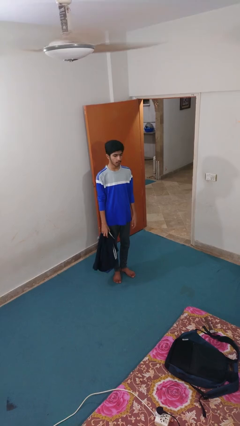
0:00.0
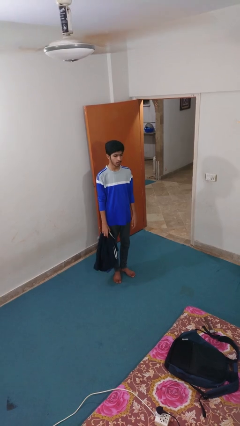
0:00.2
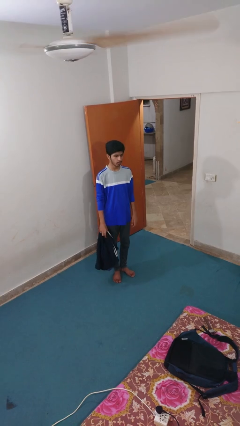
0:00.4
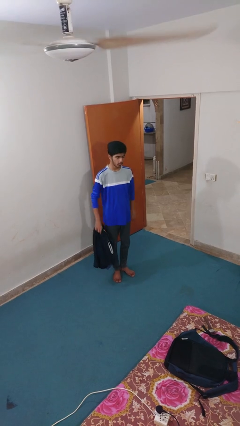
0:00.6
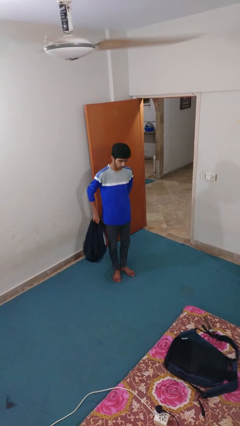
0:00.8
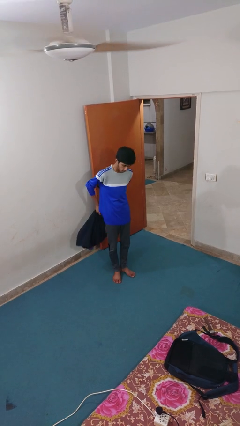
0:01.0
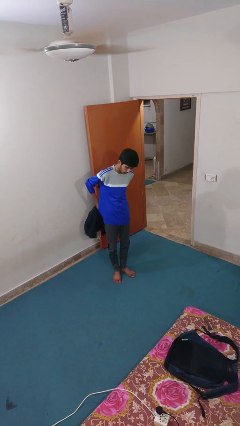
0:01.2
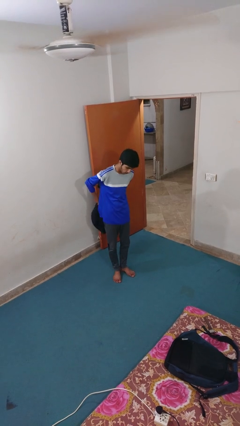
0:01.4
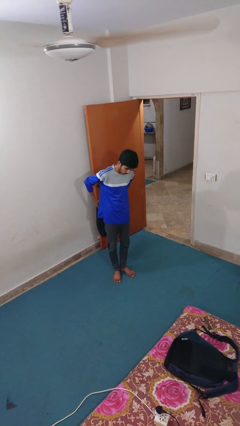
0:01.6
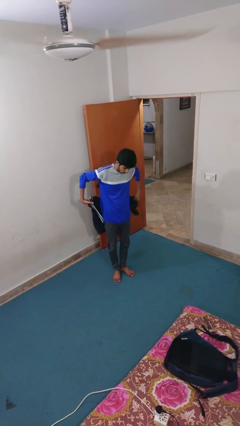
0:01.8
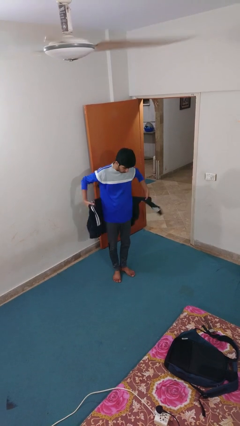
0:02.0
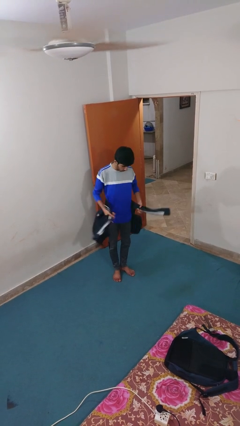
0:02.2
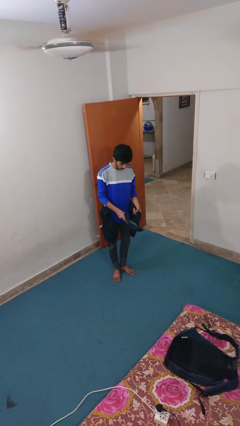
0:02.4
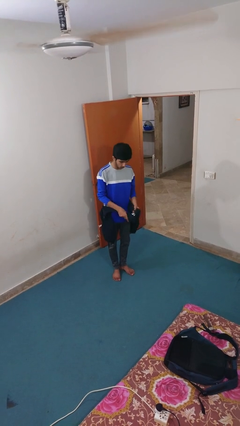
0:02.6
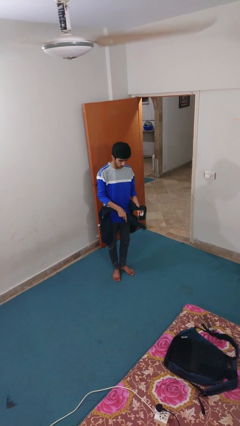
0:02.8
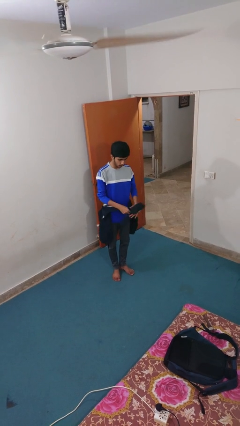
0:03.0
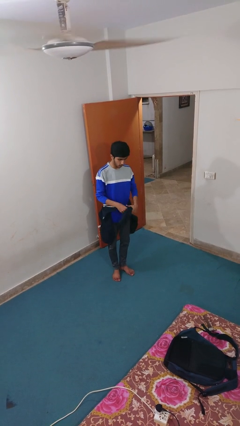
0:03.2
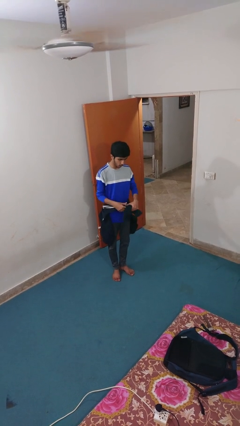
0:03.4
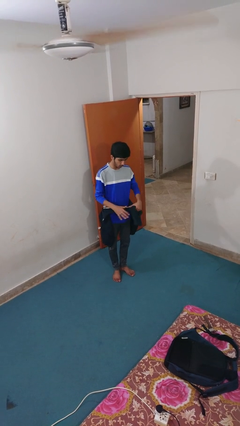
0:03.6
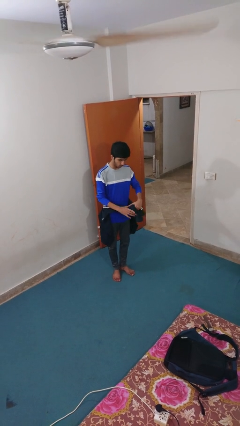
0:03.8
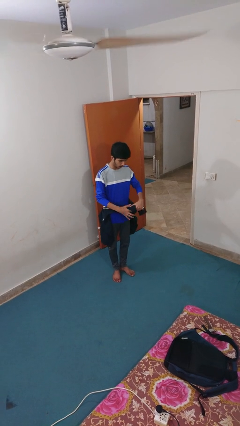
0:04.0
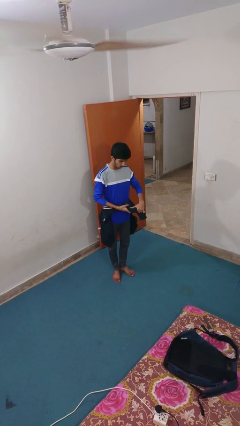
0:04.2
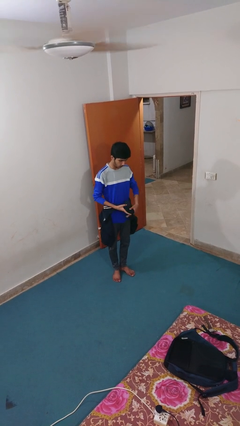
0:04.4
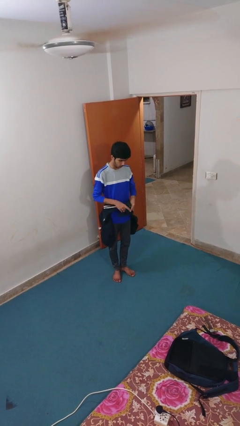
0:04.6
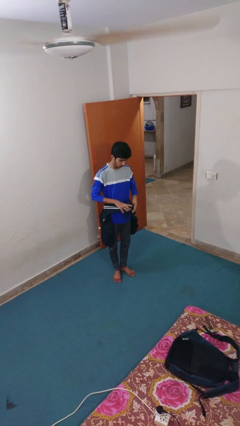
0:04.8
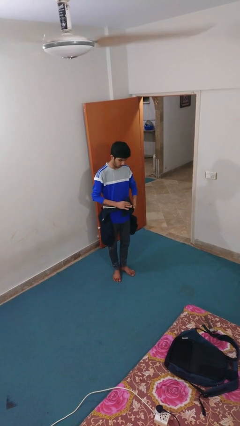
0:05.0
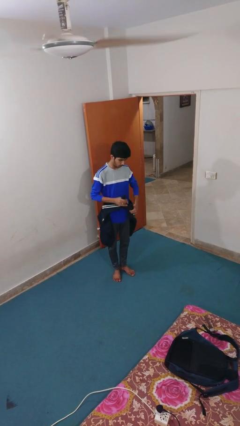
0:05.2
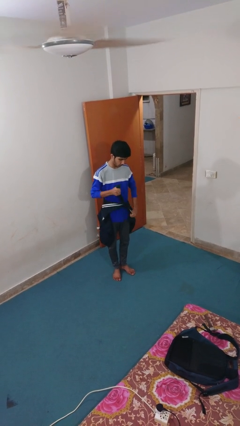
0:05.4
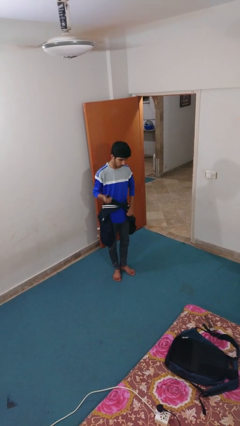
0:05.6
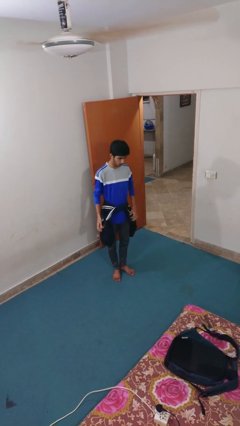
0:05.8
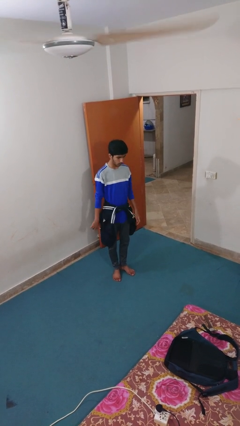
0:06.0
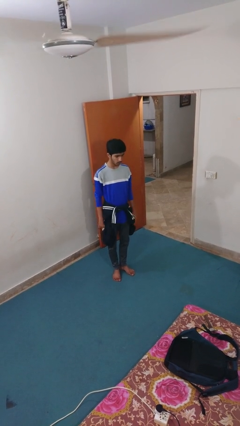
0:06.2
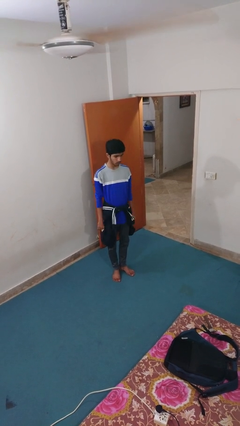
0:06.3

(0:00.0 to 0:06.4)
person ties jacket around waist

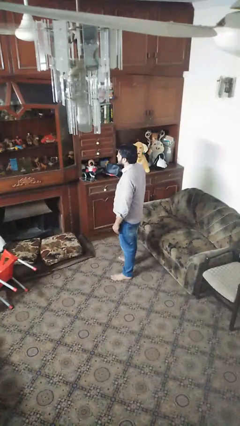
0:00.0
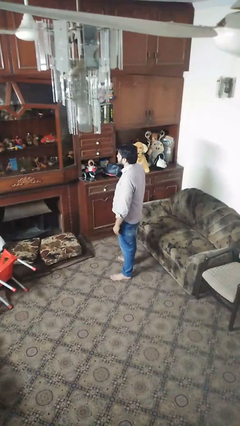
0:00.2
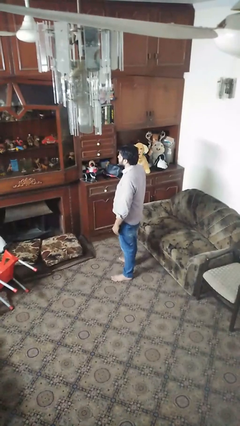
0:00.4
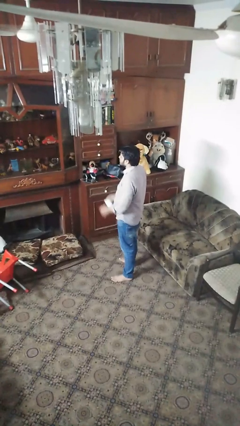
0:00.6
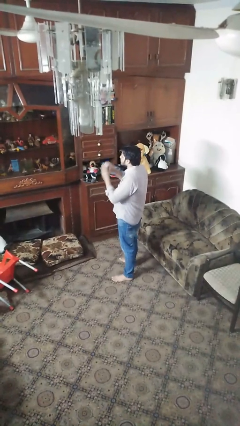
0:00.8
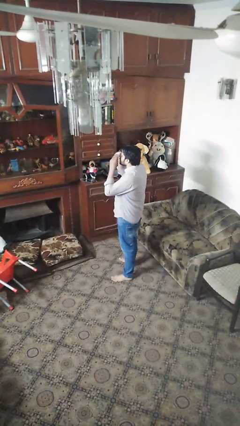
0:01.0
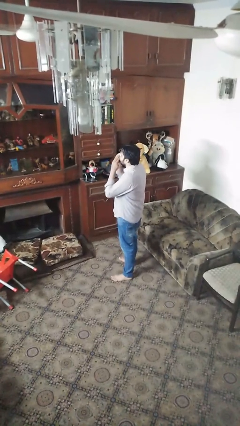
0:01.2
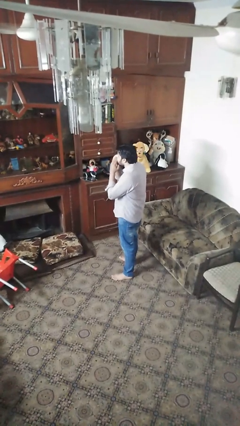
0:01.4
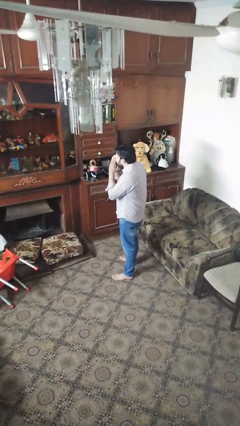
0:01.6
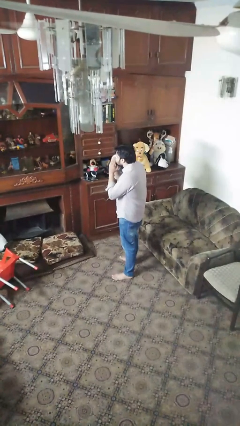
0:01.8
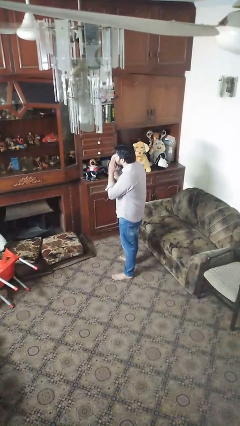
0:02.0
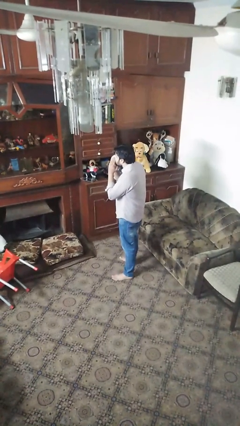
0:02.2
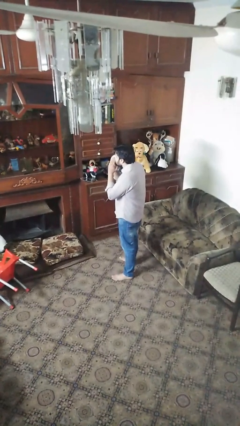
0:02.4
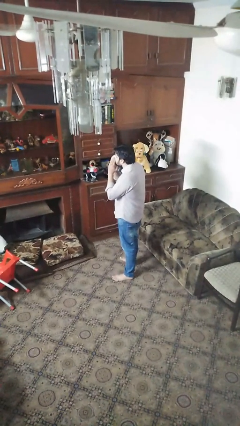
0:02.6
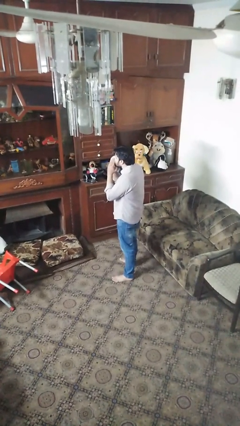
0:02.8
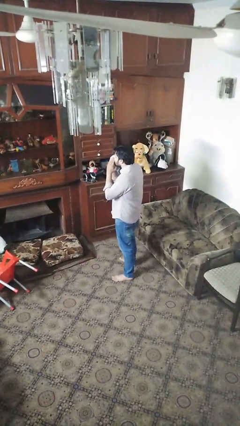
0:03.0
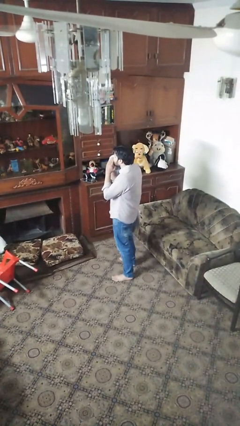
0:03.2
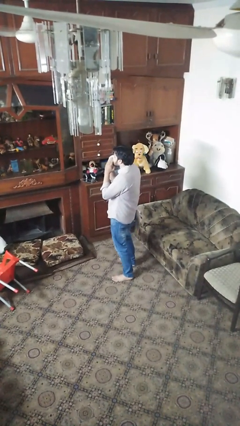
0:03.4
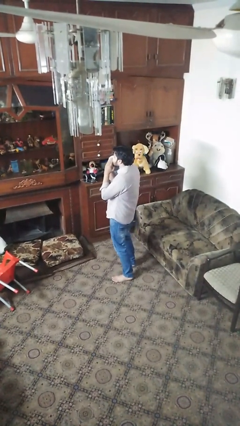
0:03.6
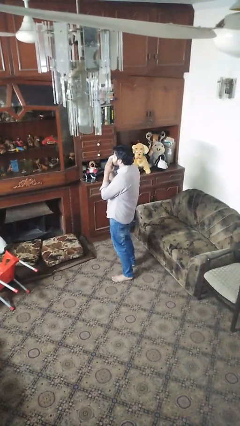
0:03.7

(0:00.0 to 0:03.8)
person blows nose

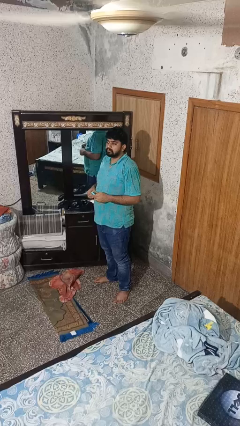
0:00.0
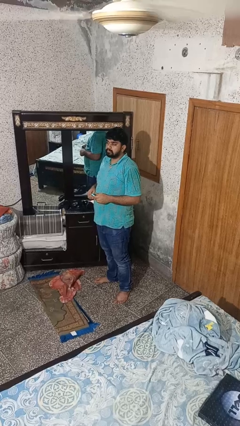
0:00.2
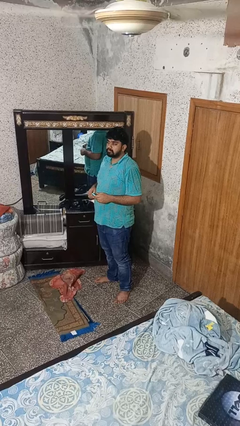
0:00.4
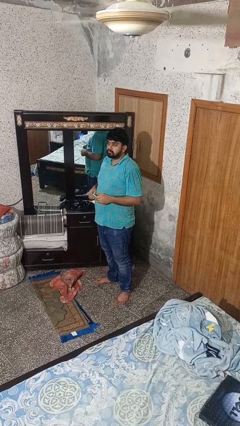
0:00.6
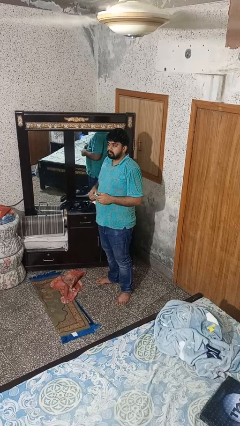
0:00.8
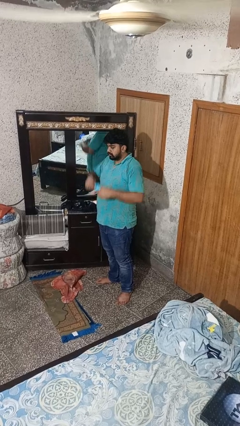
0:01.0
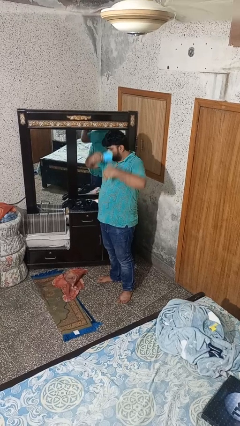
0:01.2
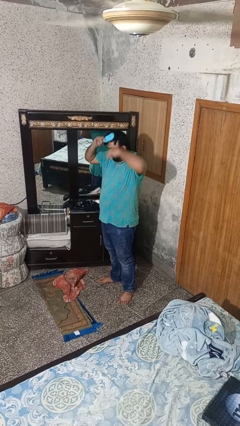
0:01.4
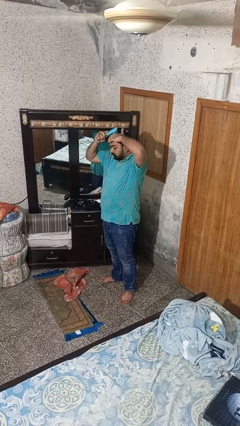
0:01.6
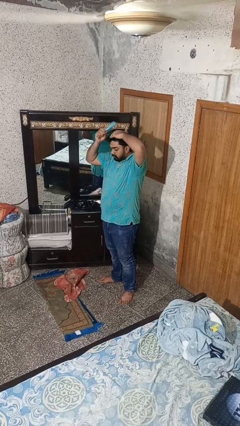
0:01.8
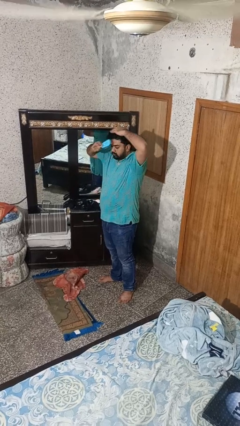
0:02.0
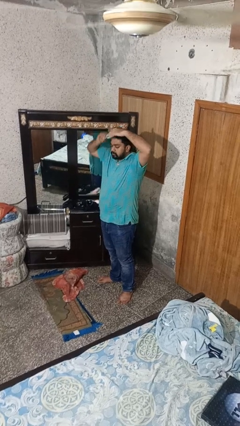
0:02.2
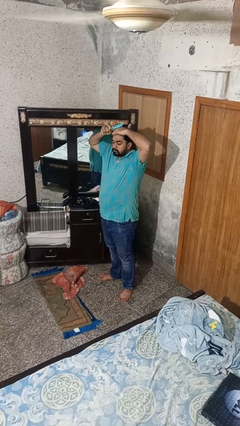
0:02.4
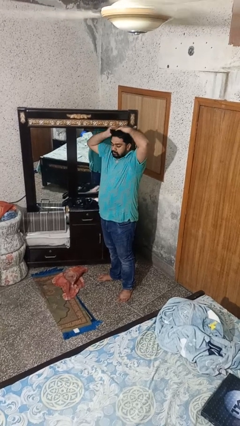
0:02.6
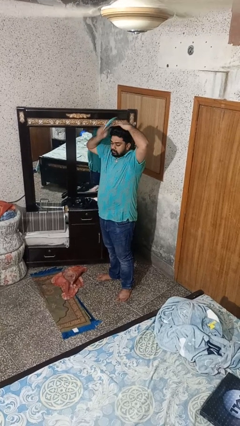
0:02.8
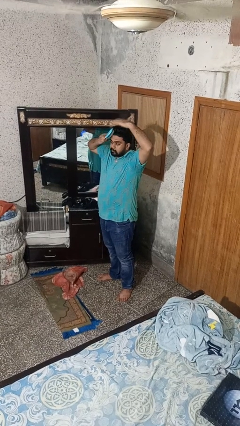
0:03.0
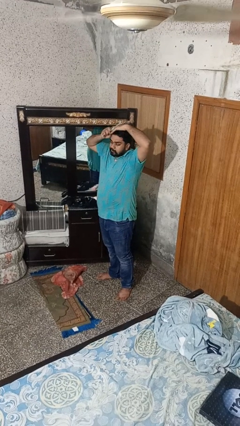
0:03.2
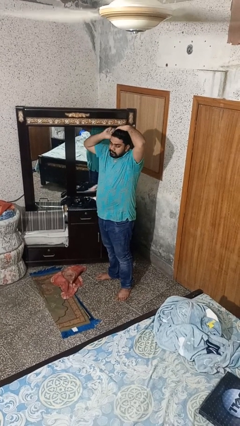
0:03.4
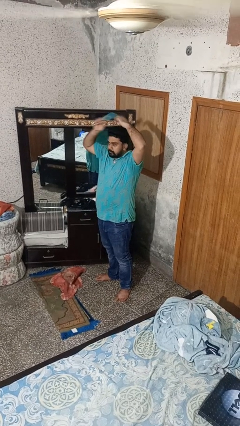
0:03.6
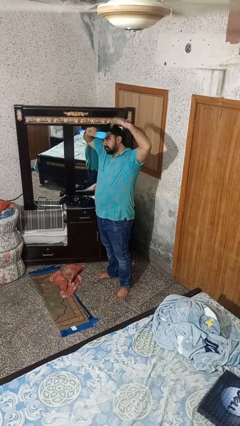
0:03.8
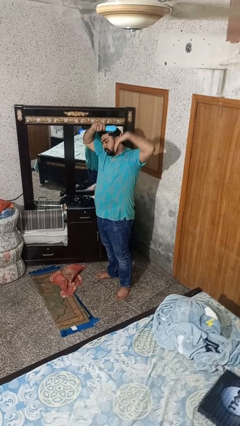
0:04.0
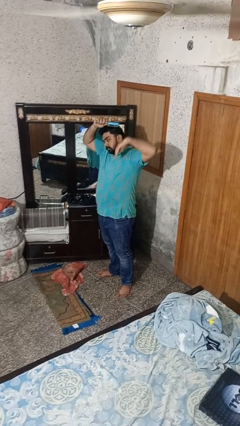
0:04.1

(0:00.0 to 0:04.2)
person brushes hair

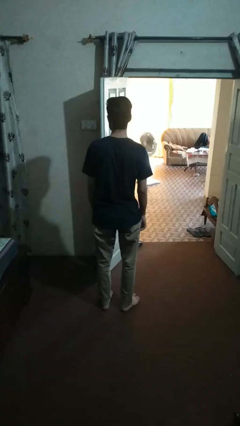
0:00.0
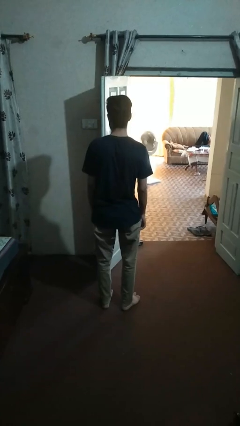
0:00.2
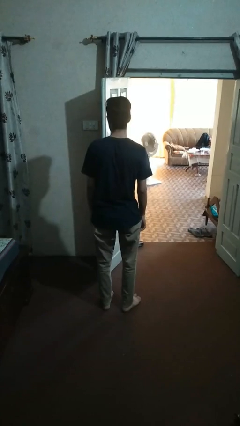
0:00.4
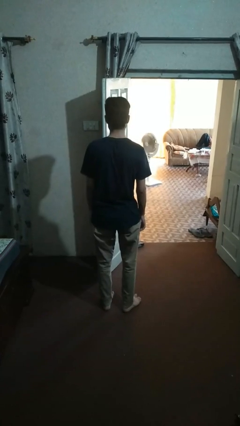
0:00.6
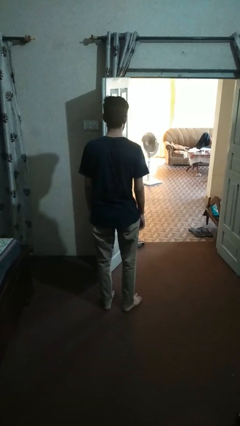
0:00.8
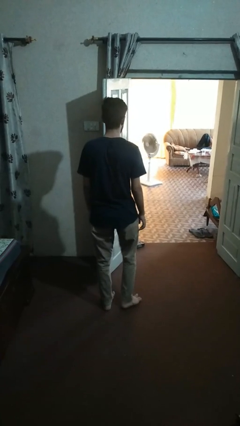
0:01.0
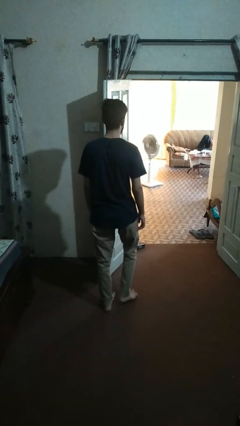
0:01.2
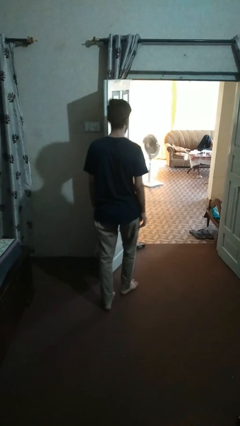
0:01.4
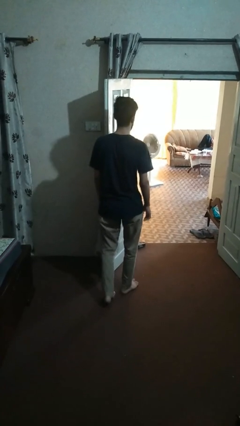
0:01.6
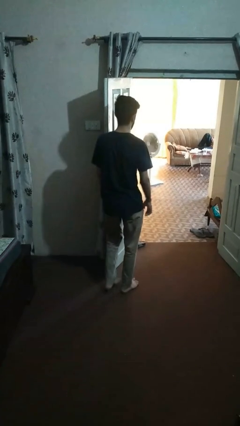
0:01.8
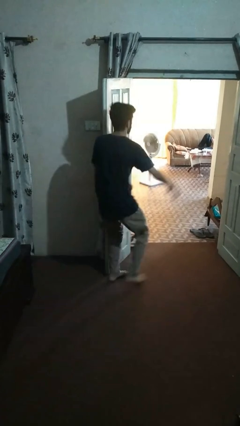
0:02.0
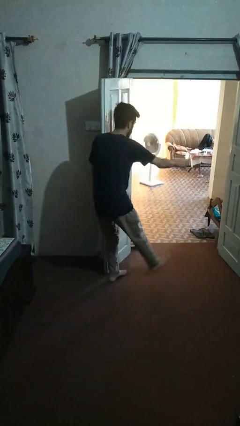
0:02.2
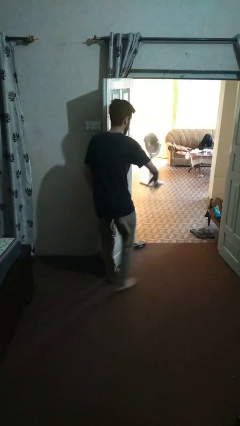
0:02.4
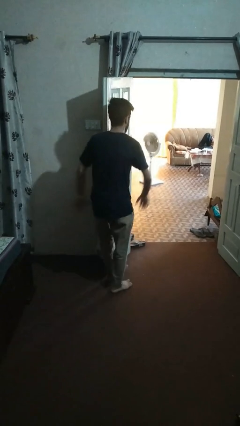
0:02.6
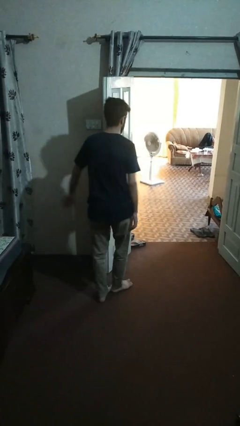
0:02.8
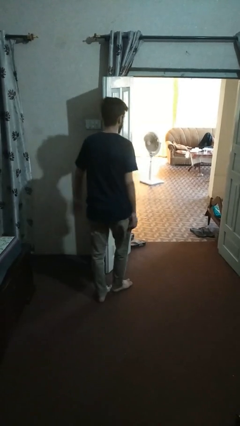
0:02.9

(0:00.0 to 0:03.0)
person bumps into wall
